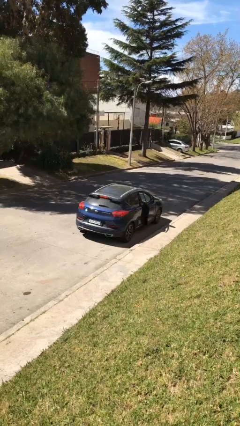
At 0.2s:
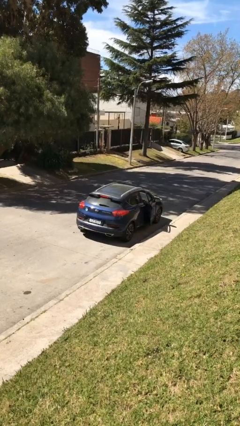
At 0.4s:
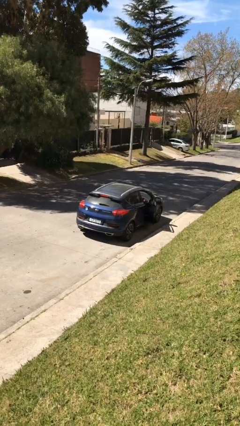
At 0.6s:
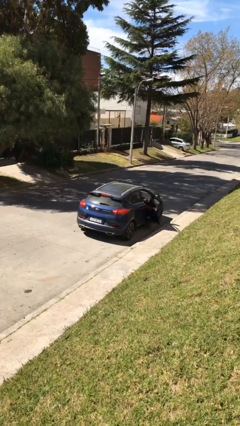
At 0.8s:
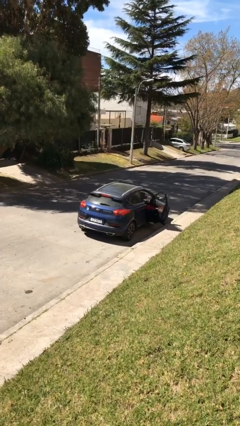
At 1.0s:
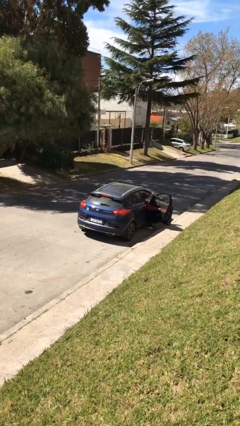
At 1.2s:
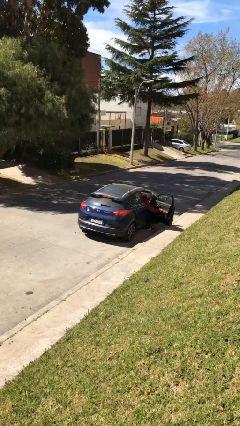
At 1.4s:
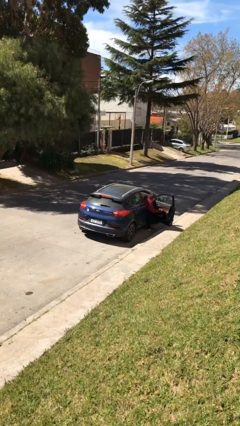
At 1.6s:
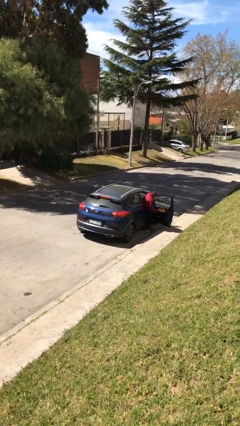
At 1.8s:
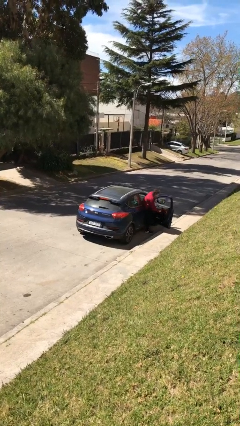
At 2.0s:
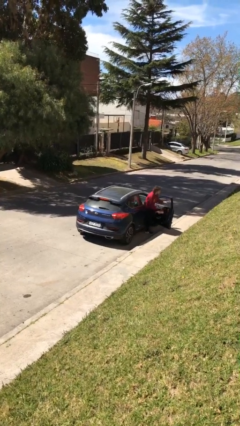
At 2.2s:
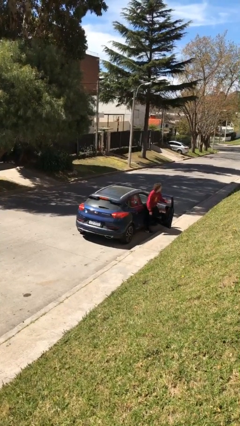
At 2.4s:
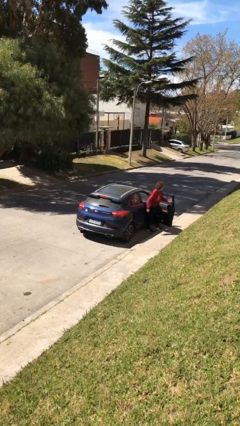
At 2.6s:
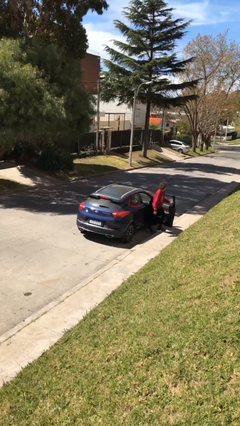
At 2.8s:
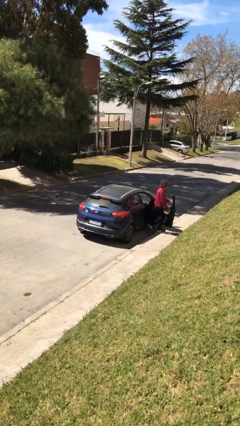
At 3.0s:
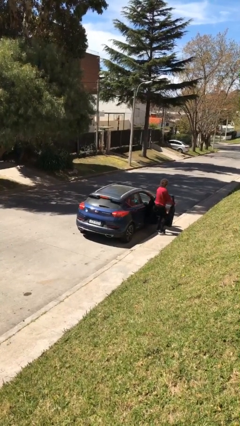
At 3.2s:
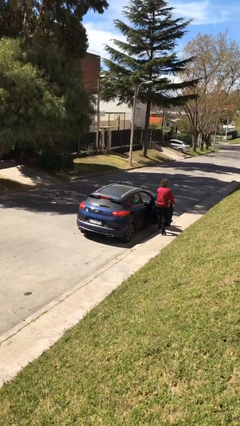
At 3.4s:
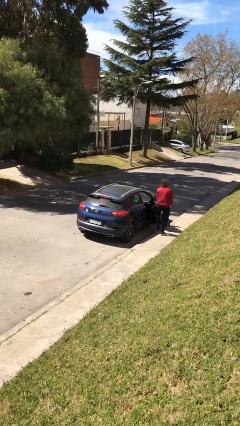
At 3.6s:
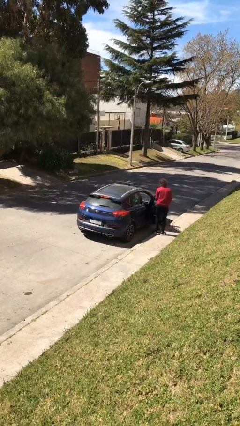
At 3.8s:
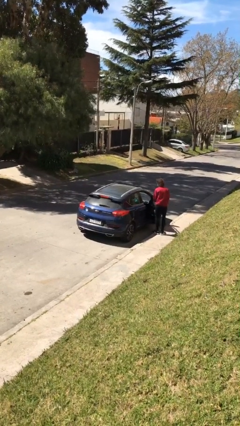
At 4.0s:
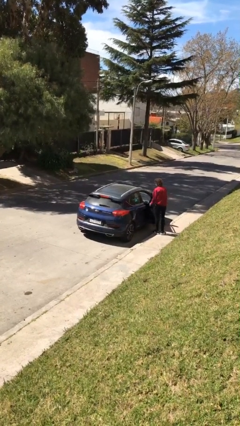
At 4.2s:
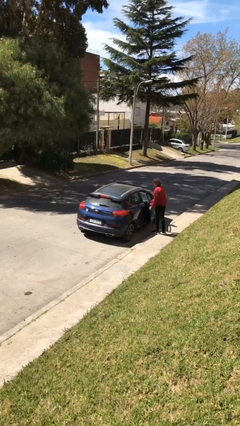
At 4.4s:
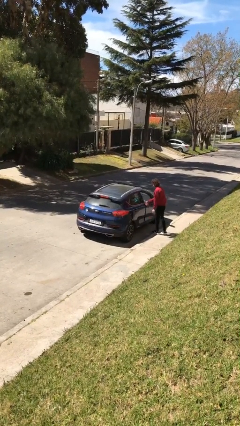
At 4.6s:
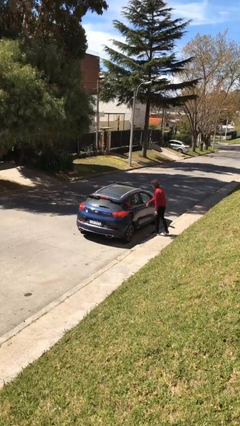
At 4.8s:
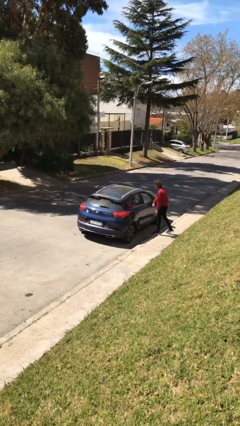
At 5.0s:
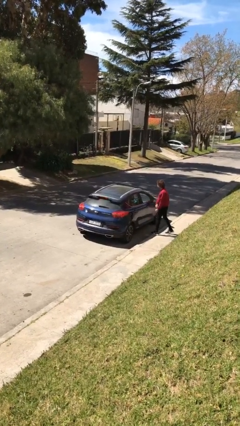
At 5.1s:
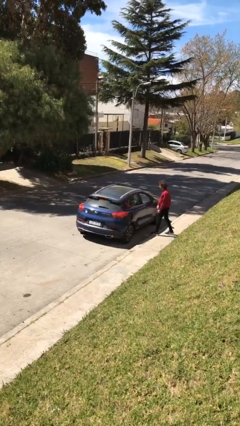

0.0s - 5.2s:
car drops off person

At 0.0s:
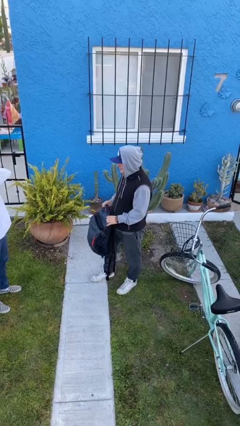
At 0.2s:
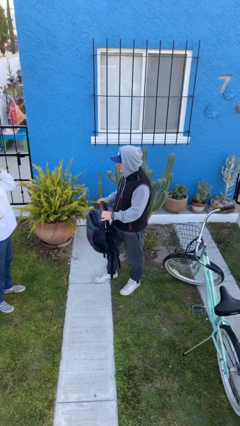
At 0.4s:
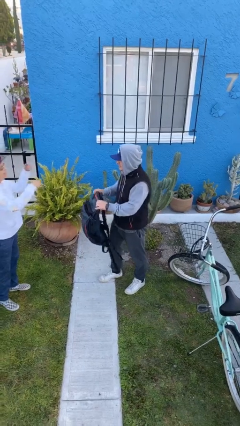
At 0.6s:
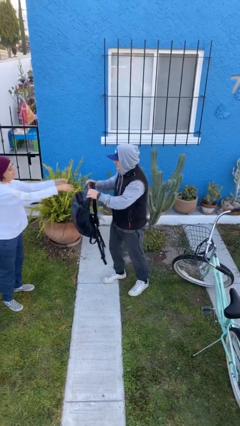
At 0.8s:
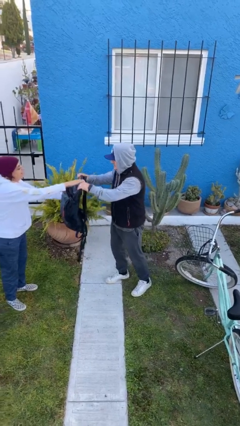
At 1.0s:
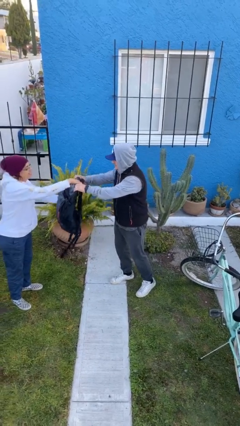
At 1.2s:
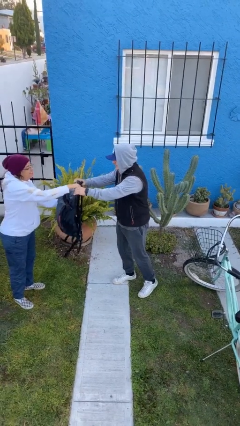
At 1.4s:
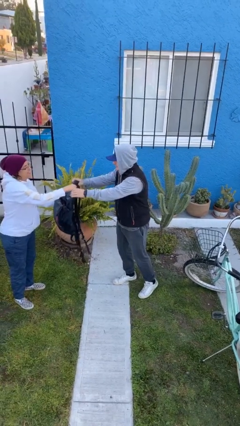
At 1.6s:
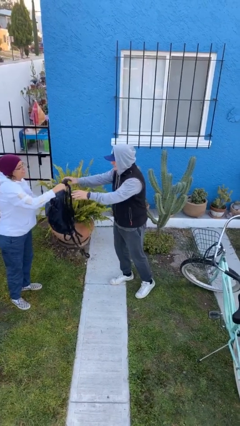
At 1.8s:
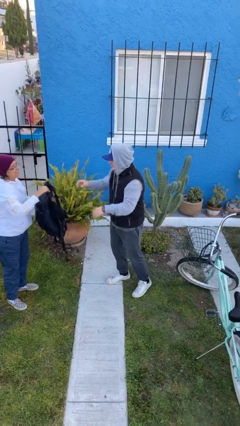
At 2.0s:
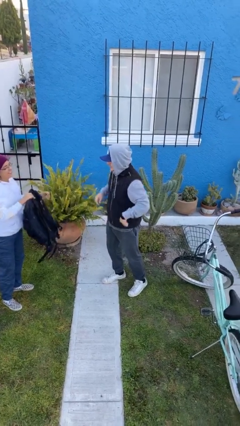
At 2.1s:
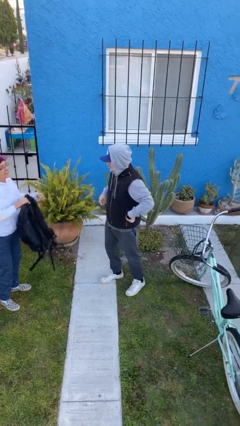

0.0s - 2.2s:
person transfers object to person

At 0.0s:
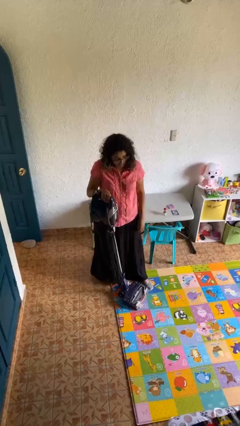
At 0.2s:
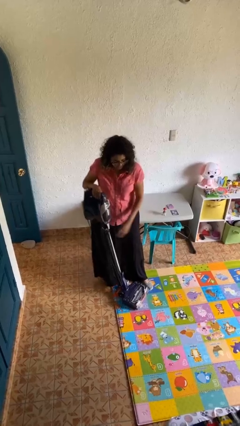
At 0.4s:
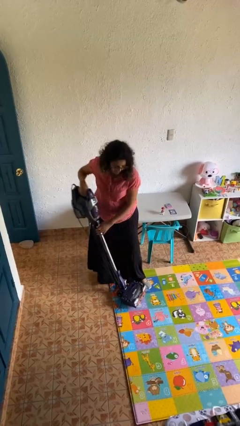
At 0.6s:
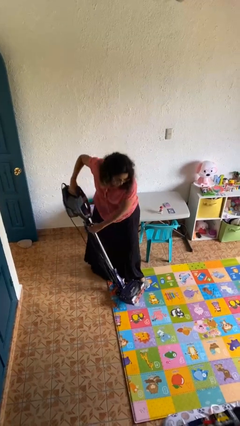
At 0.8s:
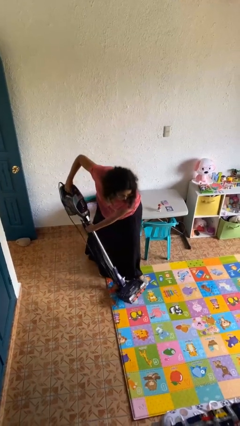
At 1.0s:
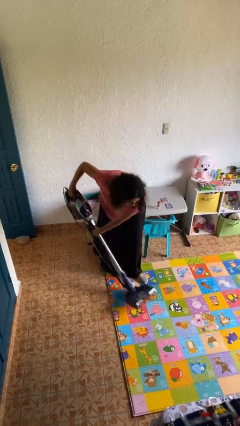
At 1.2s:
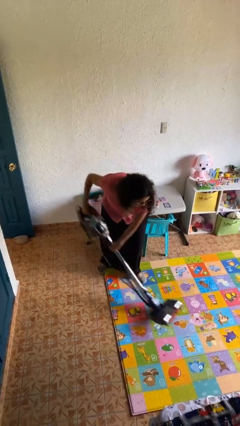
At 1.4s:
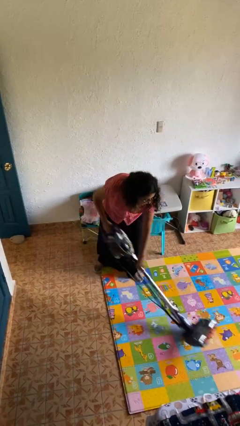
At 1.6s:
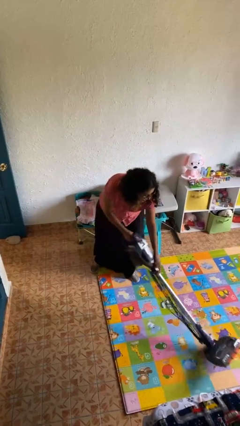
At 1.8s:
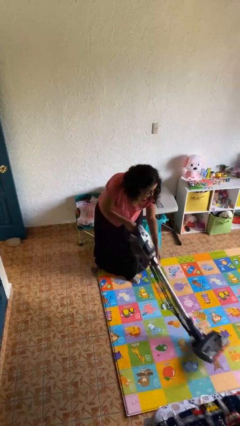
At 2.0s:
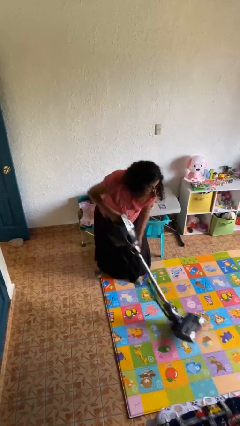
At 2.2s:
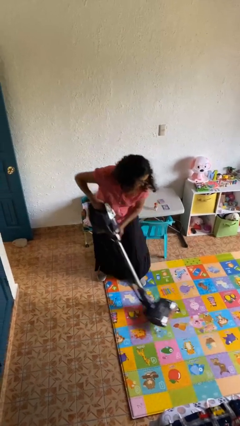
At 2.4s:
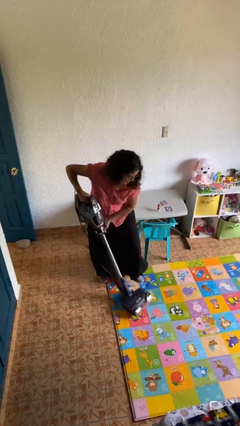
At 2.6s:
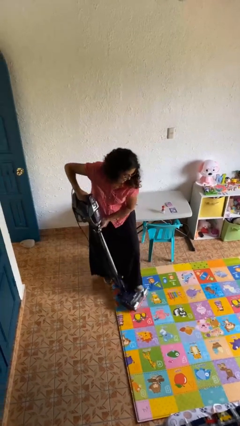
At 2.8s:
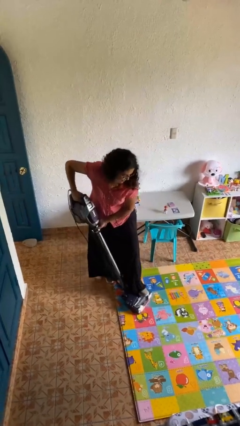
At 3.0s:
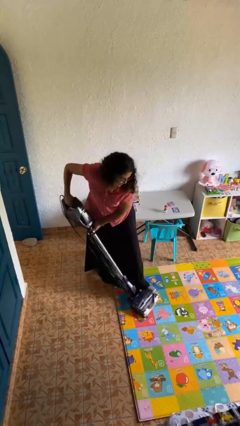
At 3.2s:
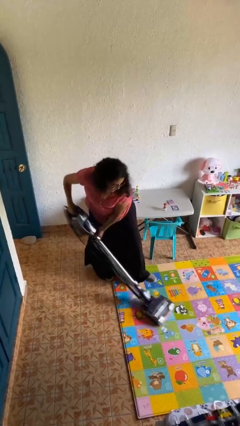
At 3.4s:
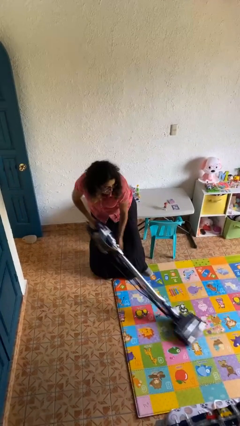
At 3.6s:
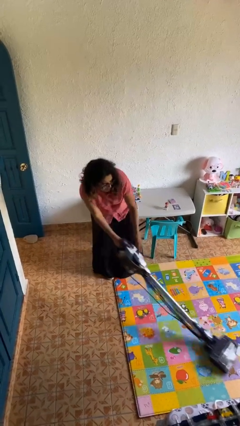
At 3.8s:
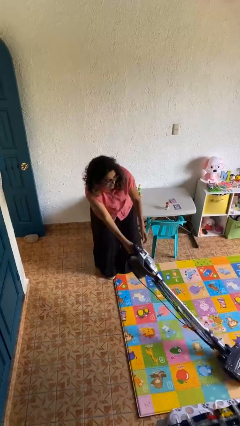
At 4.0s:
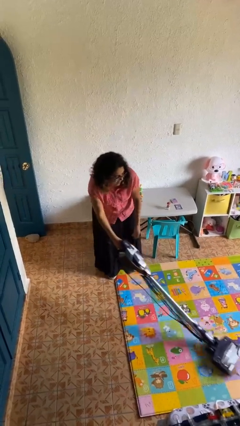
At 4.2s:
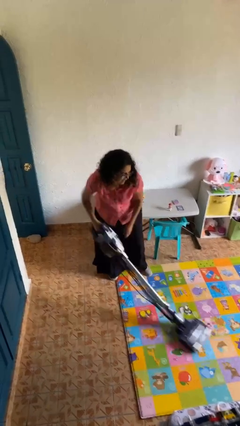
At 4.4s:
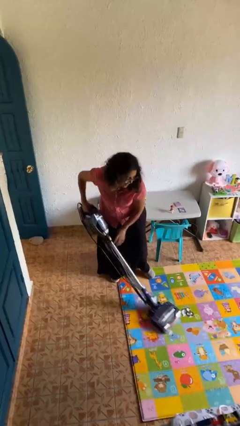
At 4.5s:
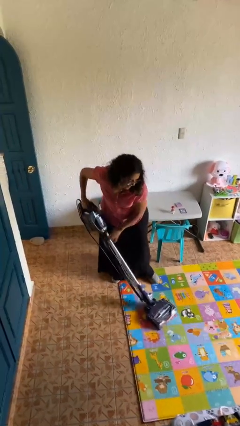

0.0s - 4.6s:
person vacuums carpet

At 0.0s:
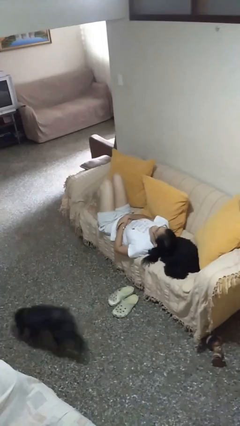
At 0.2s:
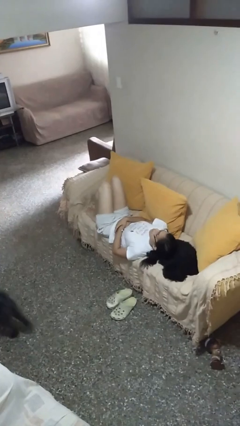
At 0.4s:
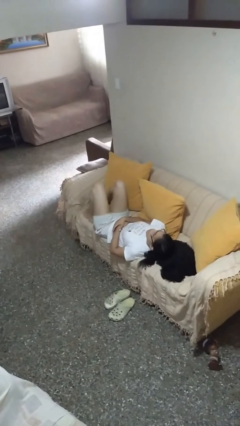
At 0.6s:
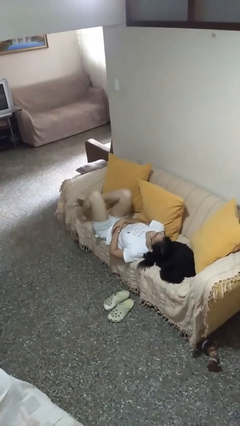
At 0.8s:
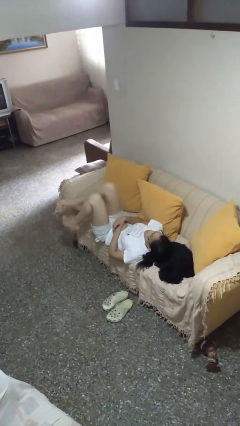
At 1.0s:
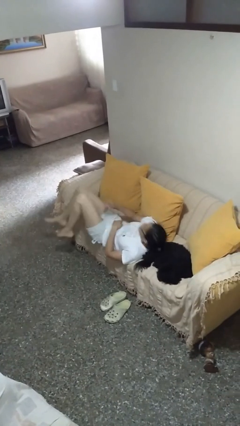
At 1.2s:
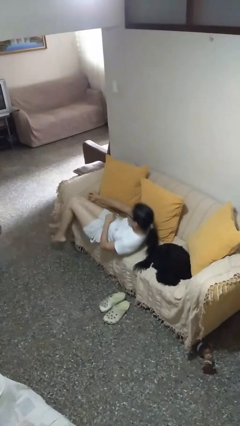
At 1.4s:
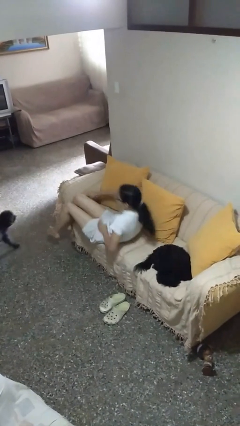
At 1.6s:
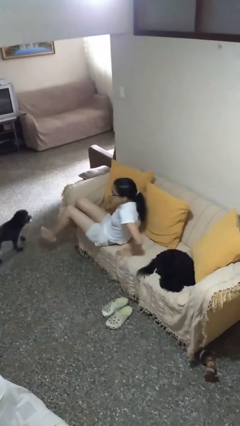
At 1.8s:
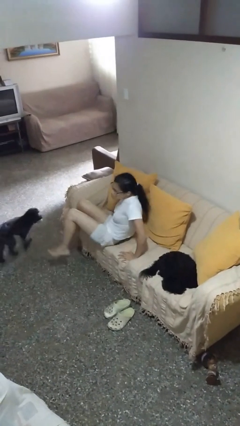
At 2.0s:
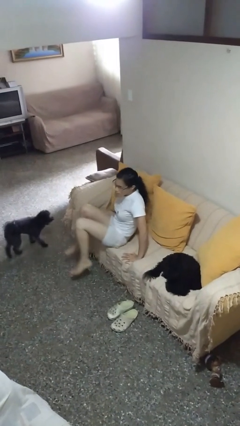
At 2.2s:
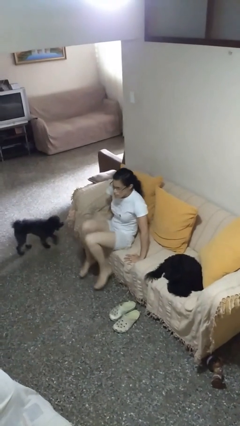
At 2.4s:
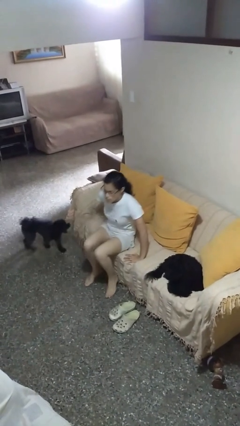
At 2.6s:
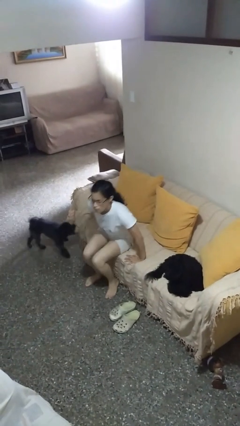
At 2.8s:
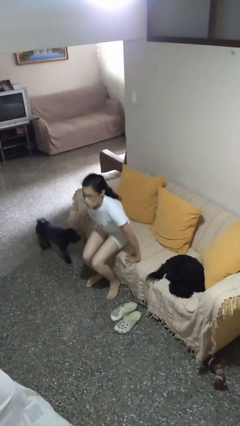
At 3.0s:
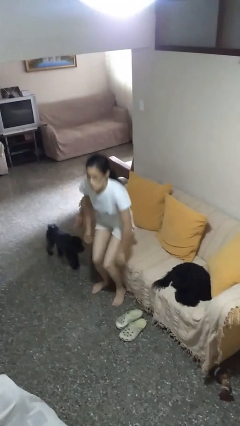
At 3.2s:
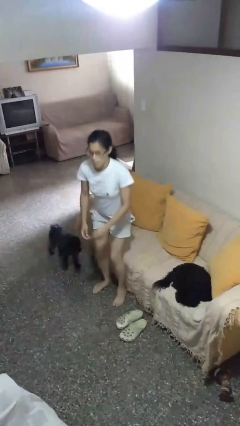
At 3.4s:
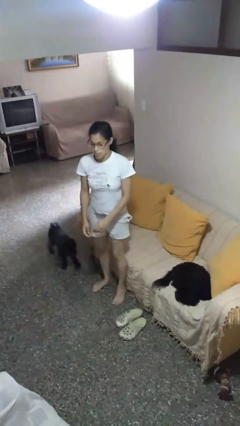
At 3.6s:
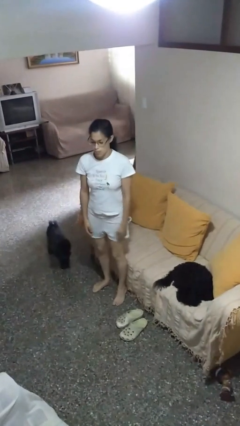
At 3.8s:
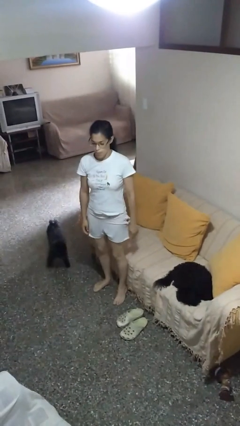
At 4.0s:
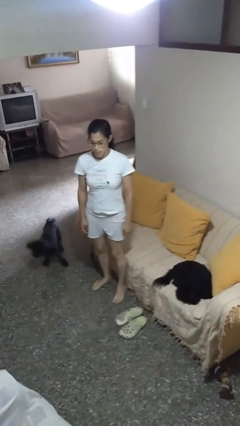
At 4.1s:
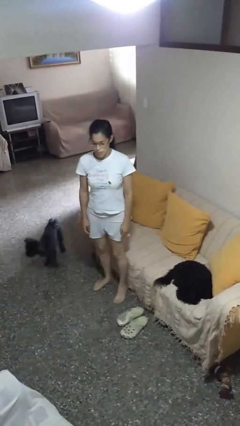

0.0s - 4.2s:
person stands up

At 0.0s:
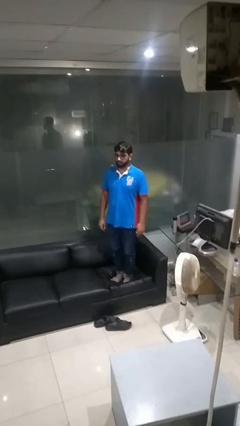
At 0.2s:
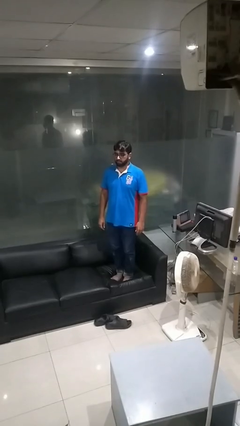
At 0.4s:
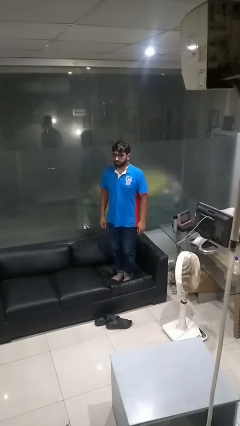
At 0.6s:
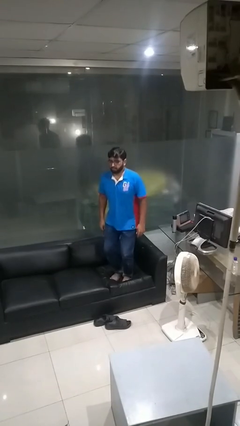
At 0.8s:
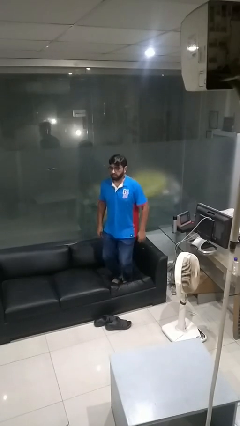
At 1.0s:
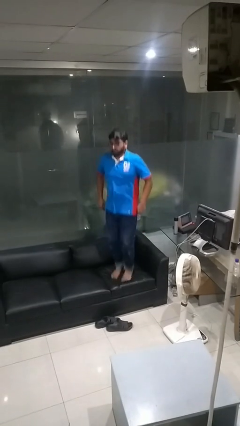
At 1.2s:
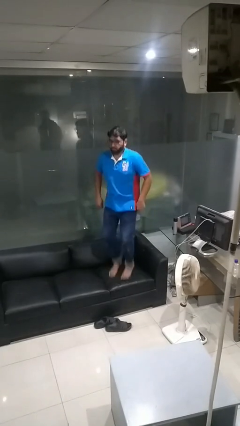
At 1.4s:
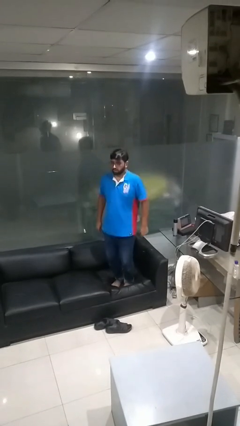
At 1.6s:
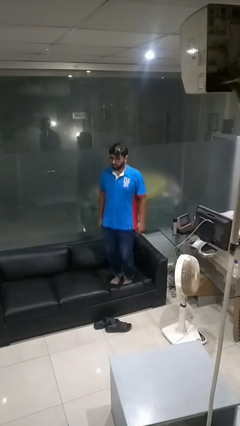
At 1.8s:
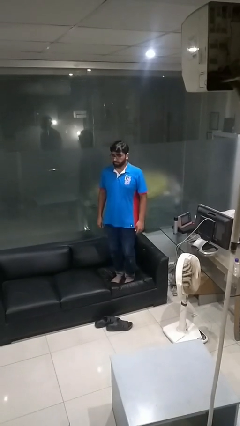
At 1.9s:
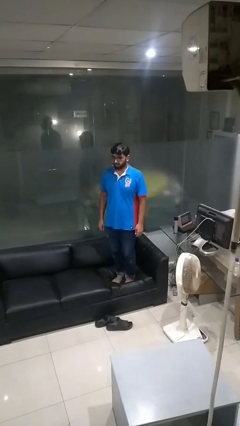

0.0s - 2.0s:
person jumps on couch

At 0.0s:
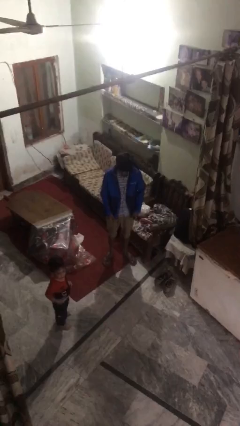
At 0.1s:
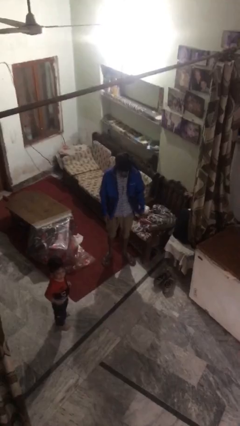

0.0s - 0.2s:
person takes off jacket
